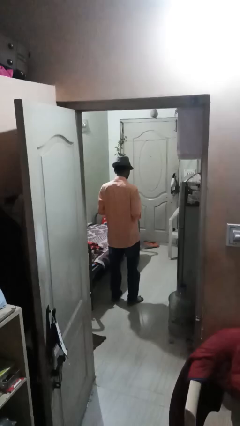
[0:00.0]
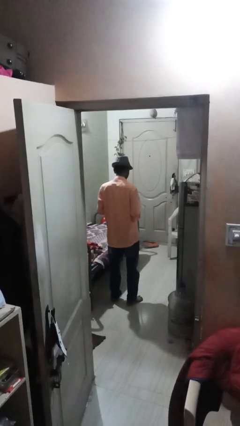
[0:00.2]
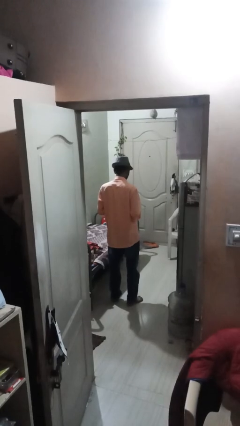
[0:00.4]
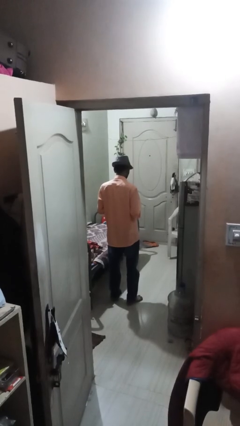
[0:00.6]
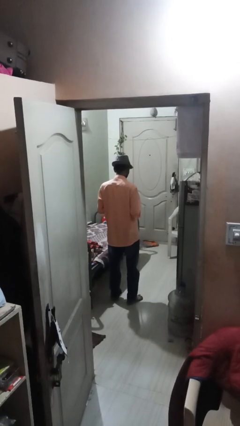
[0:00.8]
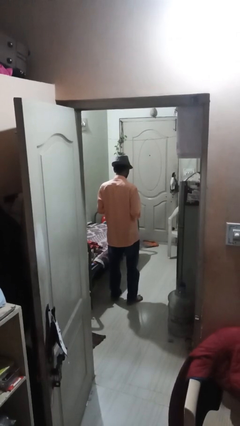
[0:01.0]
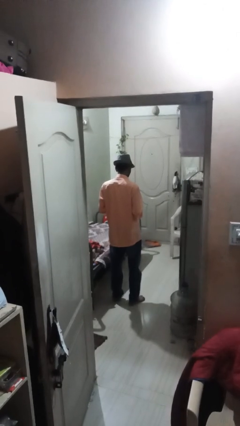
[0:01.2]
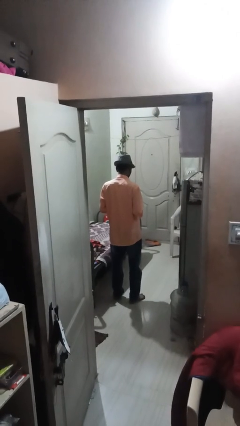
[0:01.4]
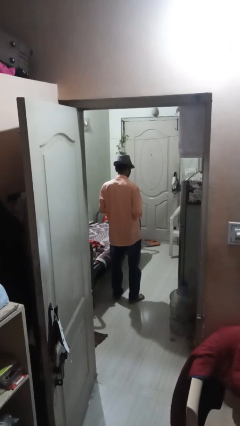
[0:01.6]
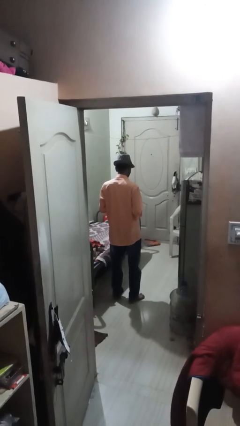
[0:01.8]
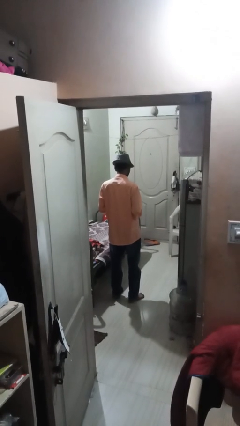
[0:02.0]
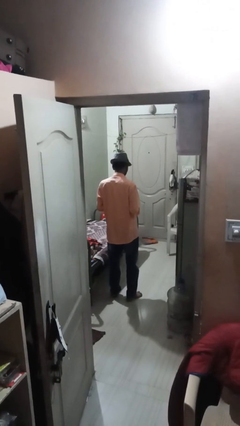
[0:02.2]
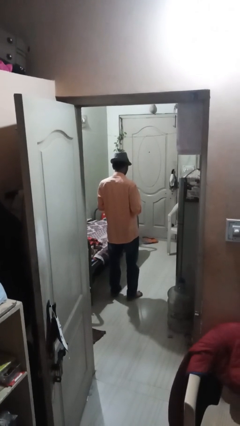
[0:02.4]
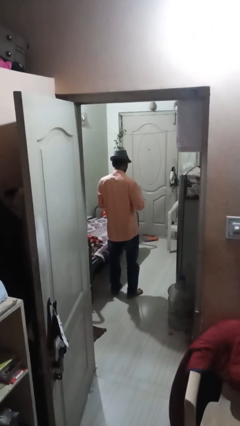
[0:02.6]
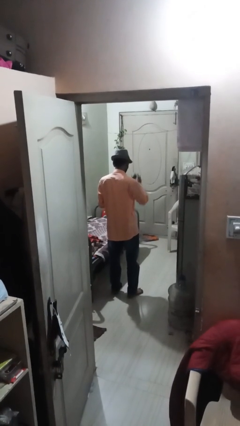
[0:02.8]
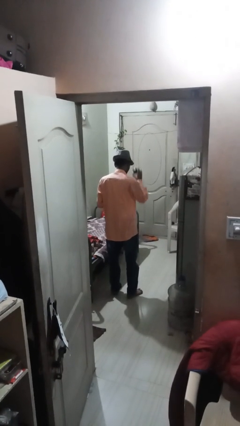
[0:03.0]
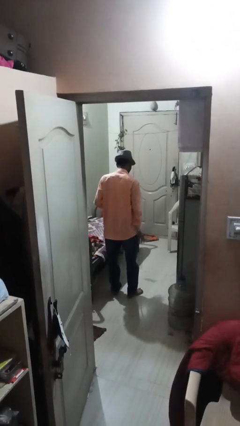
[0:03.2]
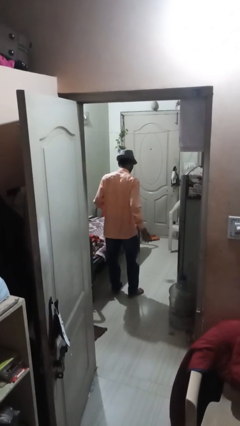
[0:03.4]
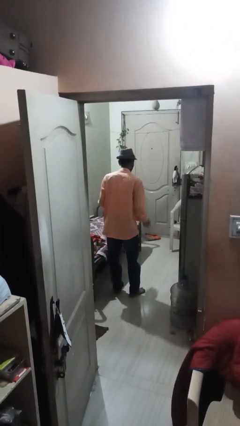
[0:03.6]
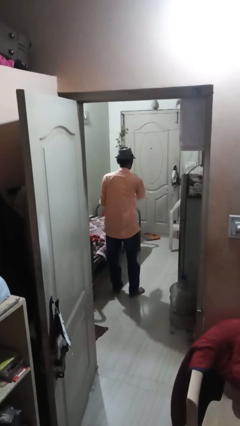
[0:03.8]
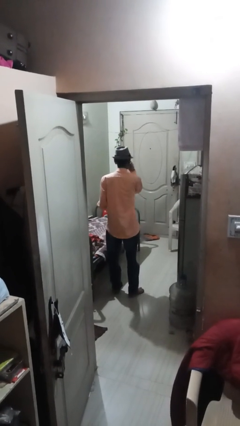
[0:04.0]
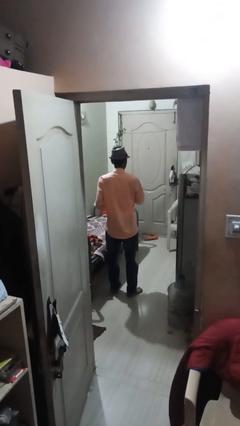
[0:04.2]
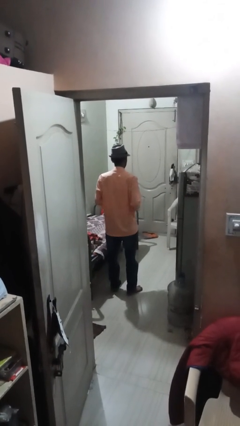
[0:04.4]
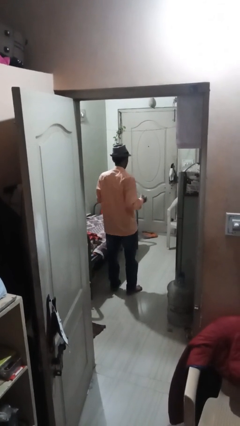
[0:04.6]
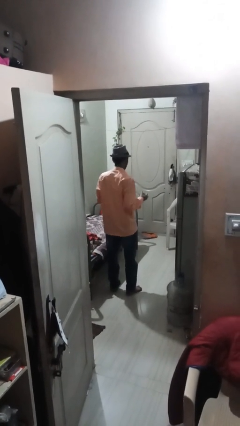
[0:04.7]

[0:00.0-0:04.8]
person bounces ball on floor

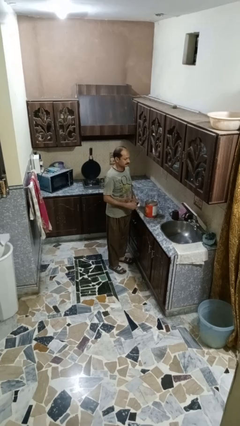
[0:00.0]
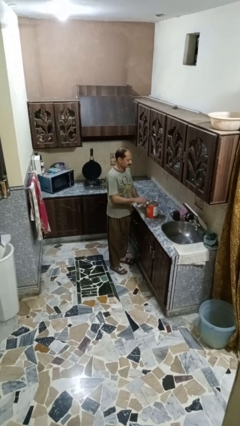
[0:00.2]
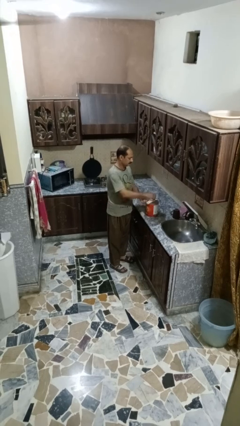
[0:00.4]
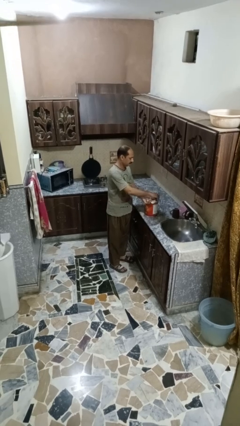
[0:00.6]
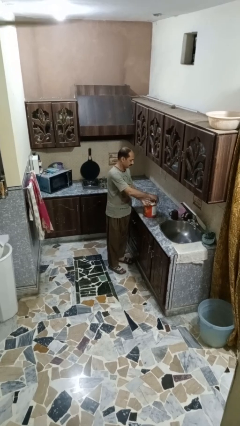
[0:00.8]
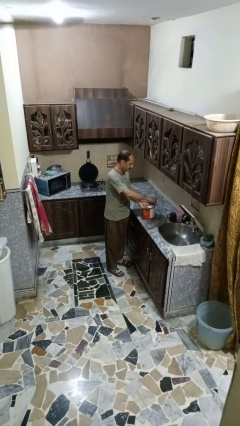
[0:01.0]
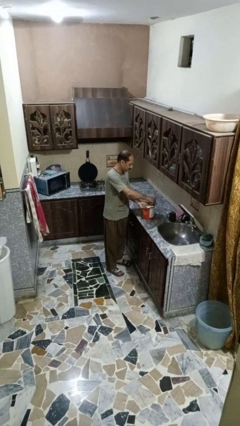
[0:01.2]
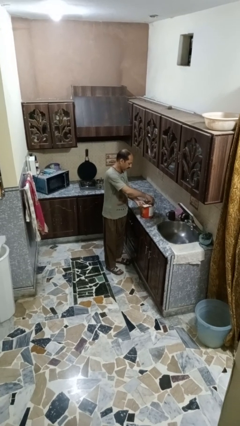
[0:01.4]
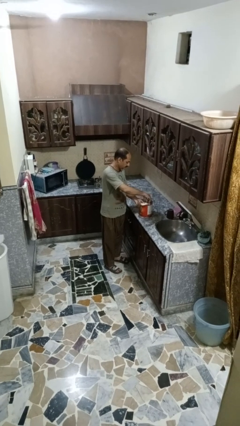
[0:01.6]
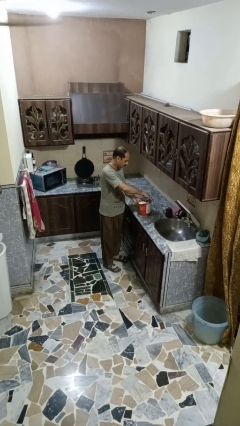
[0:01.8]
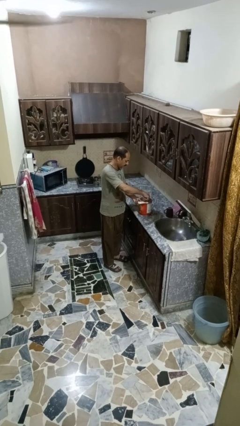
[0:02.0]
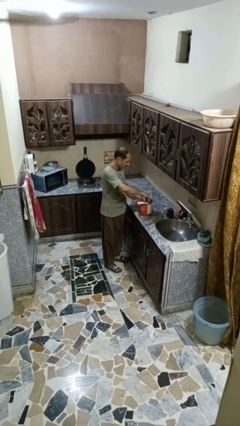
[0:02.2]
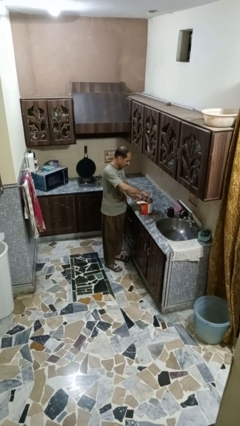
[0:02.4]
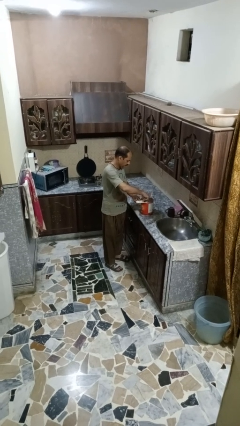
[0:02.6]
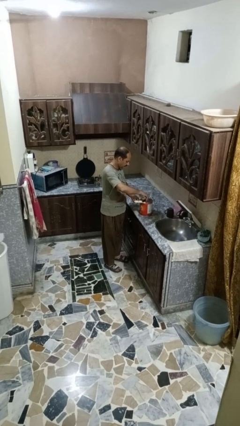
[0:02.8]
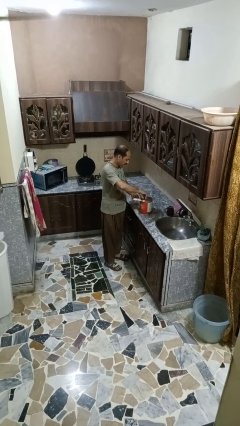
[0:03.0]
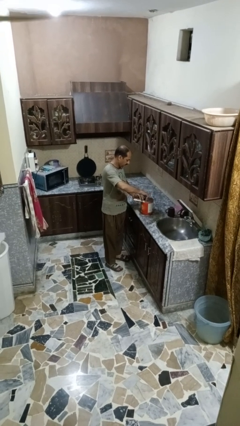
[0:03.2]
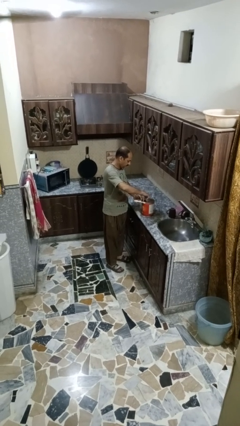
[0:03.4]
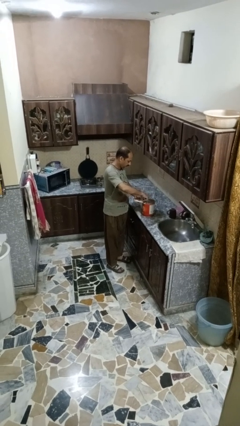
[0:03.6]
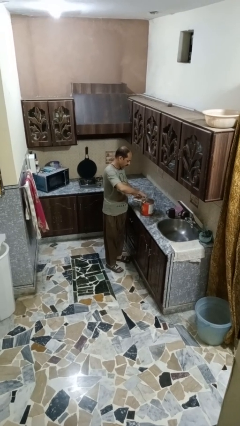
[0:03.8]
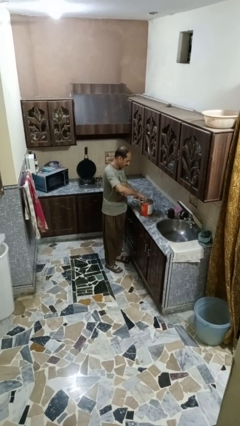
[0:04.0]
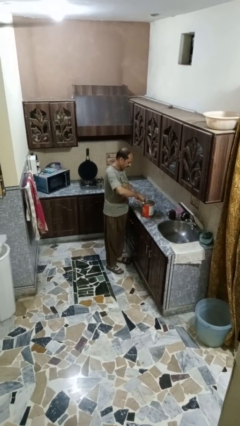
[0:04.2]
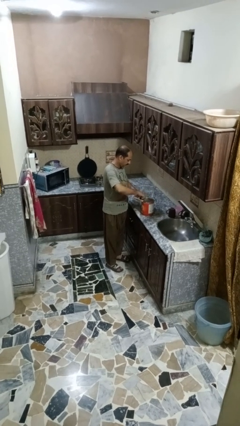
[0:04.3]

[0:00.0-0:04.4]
person opens can with can opener

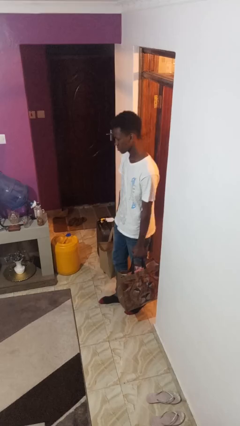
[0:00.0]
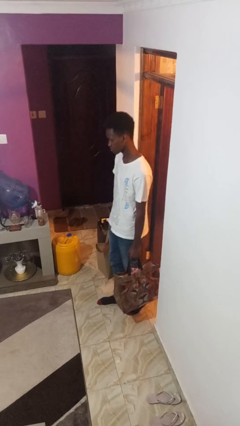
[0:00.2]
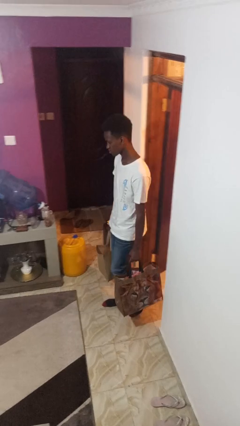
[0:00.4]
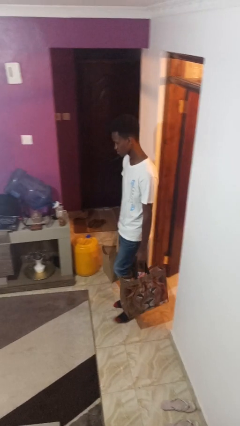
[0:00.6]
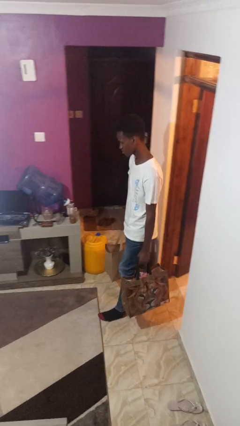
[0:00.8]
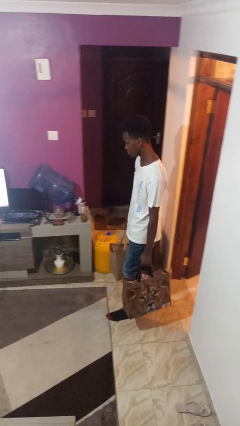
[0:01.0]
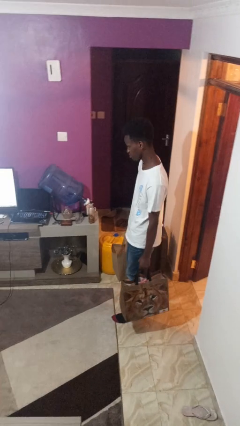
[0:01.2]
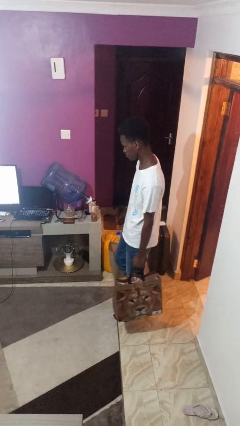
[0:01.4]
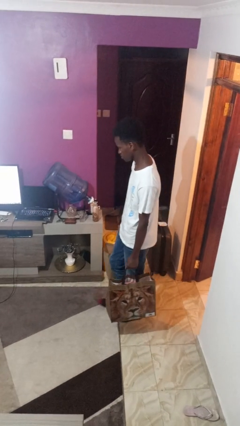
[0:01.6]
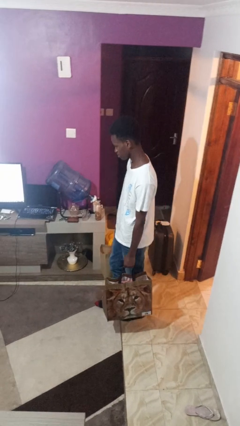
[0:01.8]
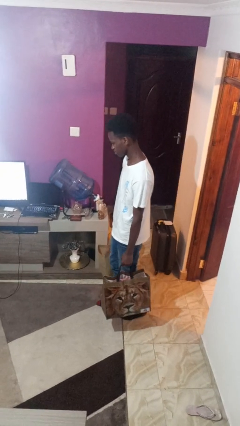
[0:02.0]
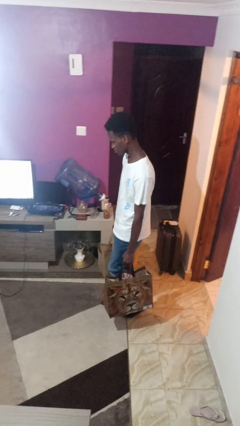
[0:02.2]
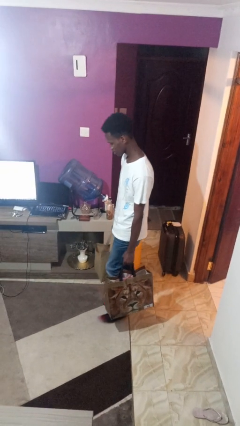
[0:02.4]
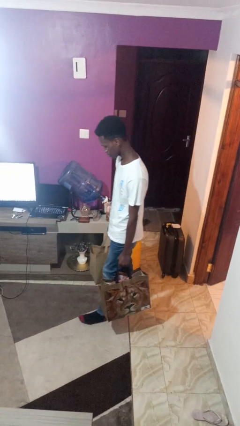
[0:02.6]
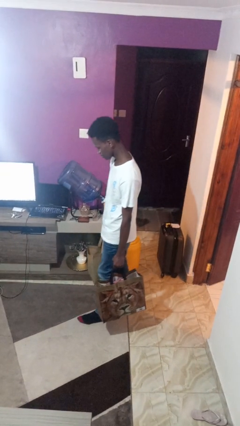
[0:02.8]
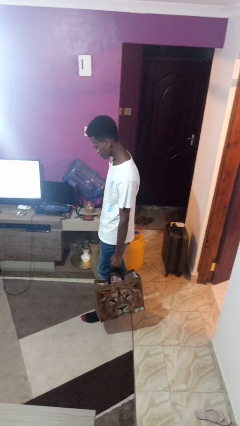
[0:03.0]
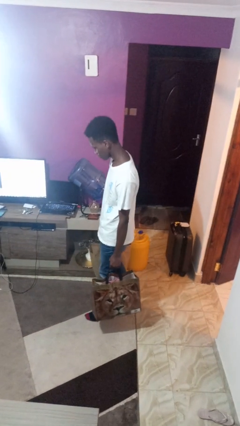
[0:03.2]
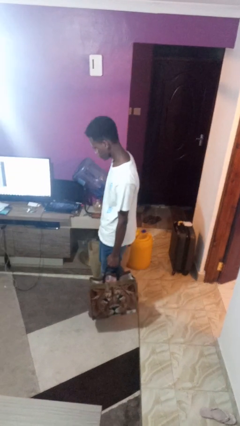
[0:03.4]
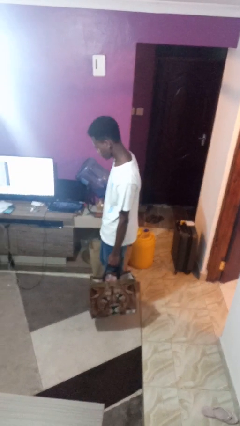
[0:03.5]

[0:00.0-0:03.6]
person carries groceries

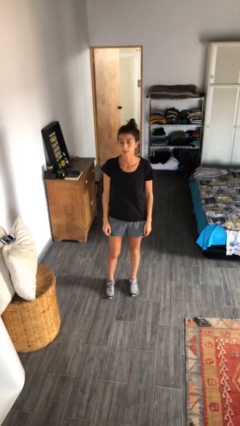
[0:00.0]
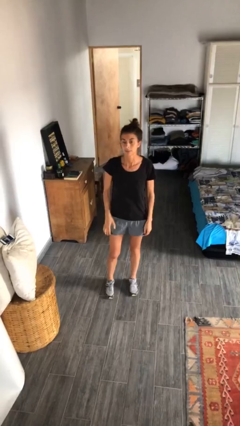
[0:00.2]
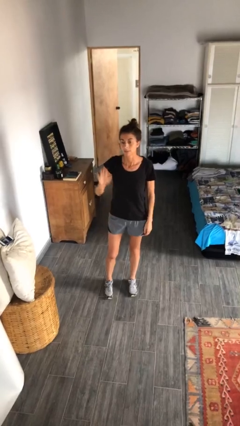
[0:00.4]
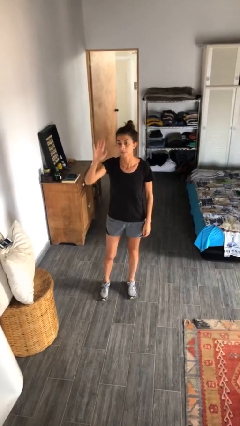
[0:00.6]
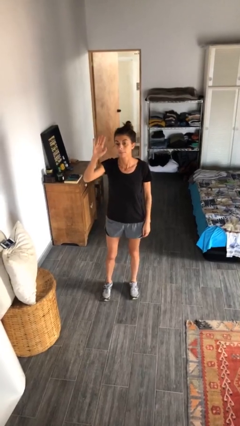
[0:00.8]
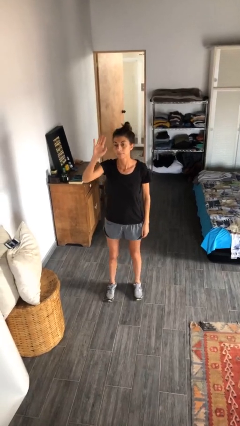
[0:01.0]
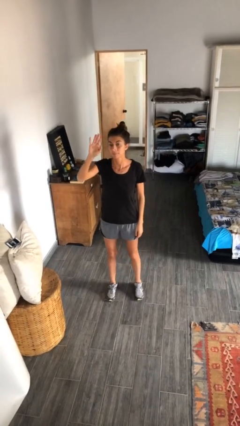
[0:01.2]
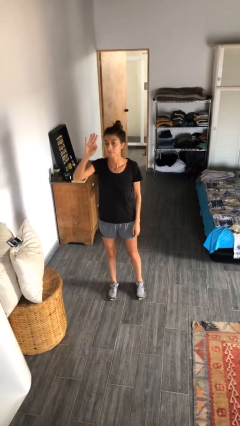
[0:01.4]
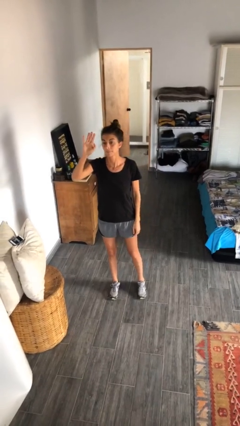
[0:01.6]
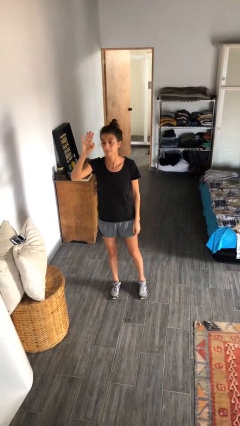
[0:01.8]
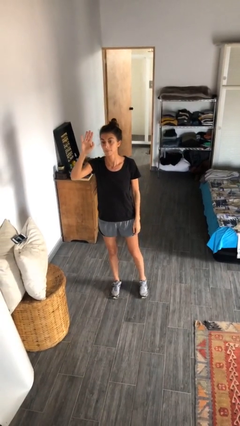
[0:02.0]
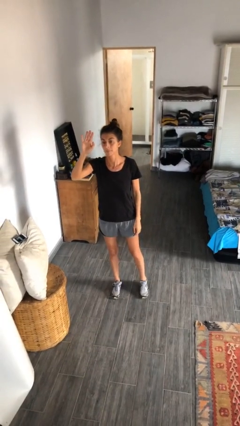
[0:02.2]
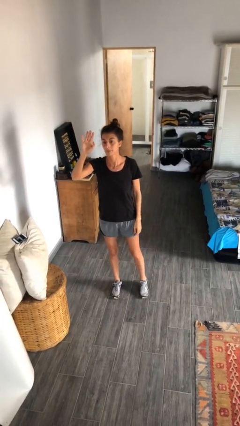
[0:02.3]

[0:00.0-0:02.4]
person gestures raise hand

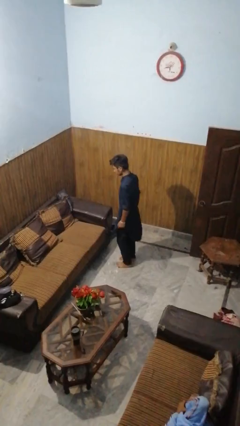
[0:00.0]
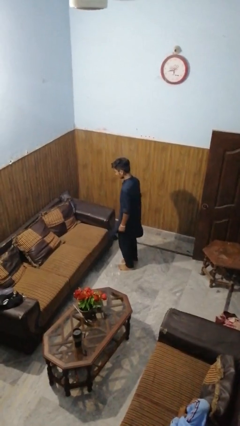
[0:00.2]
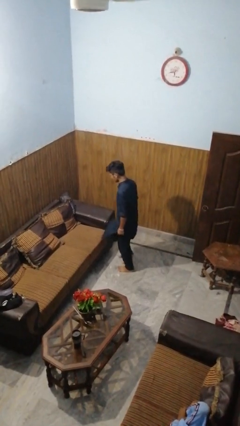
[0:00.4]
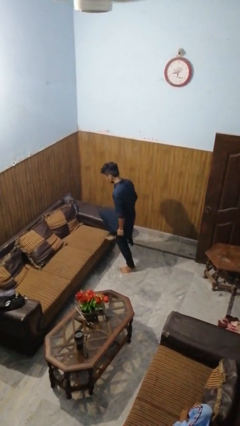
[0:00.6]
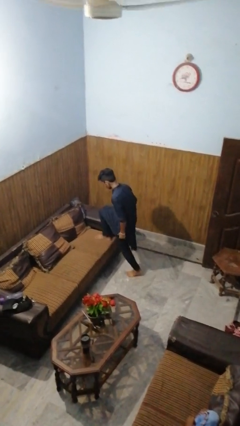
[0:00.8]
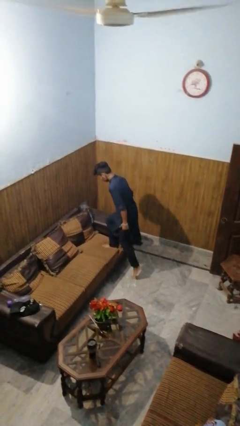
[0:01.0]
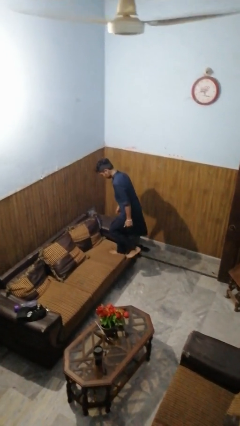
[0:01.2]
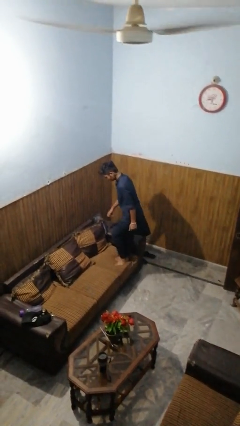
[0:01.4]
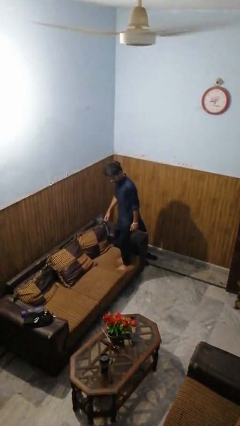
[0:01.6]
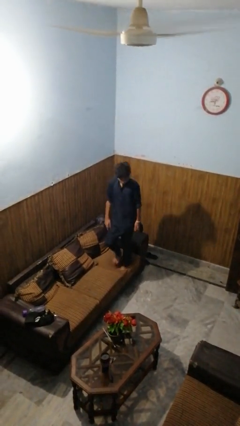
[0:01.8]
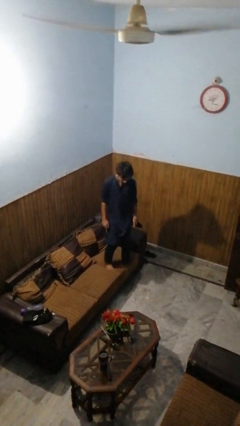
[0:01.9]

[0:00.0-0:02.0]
person climbs on couch

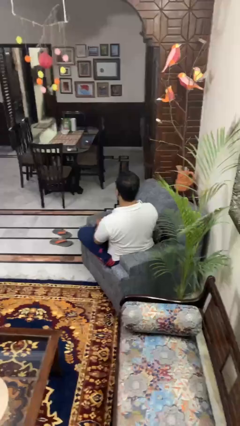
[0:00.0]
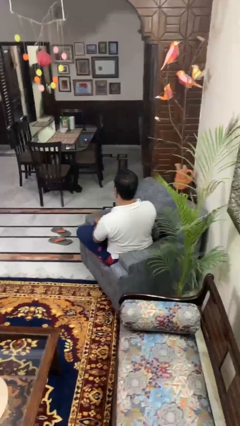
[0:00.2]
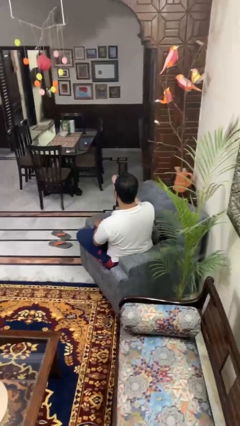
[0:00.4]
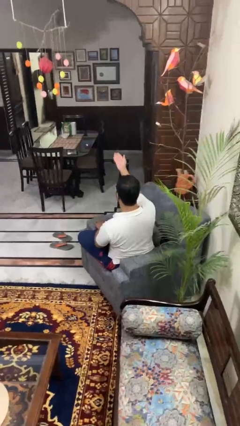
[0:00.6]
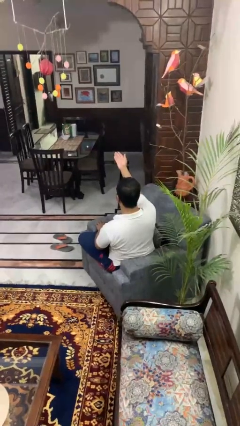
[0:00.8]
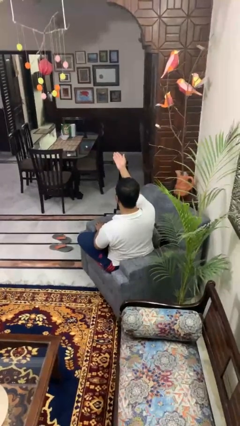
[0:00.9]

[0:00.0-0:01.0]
person gestures swipe up
